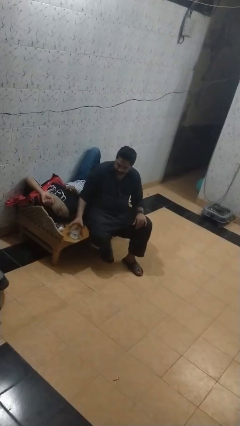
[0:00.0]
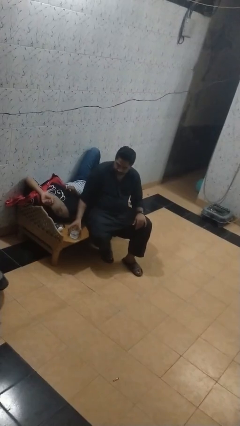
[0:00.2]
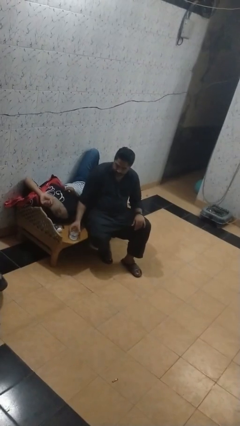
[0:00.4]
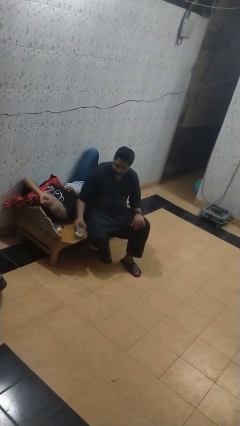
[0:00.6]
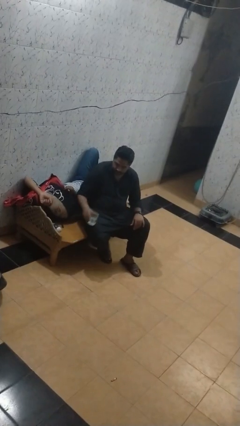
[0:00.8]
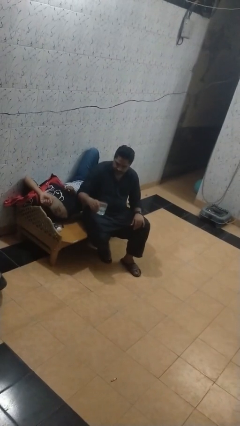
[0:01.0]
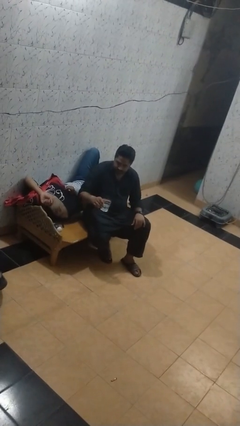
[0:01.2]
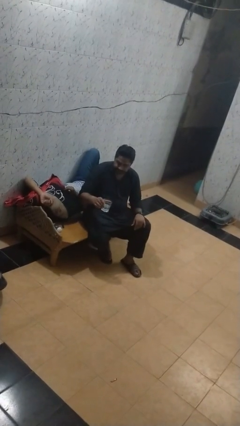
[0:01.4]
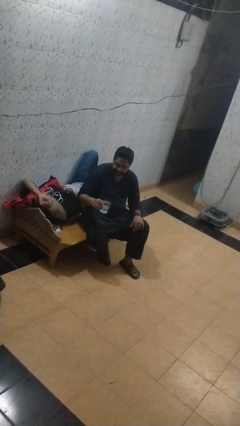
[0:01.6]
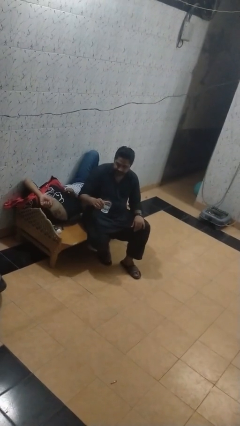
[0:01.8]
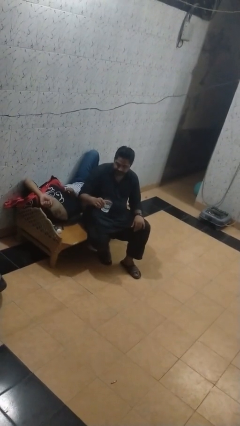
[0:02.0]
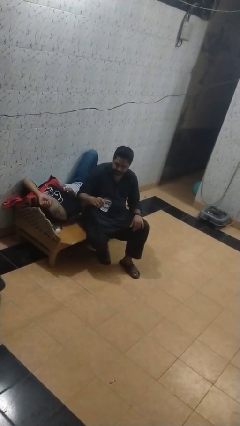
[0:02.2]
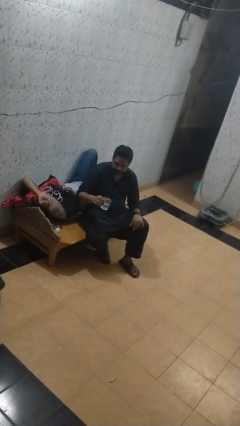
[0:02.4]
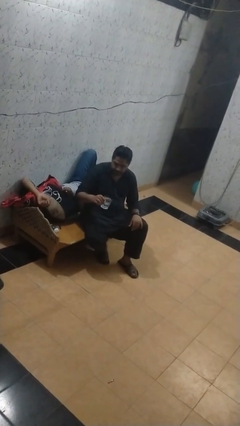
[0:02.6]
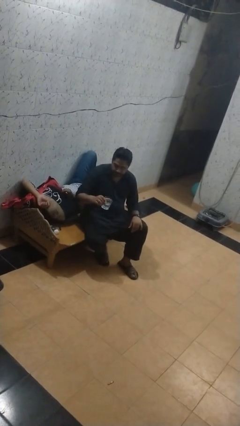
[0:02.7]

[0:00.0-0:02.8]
person picks up object from table

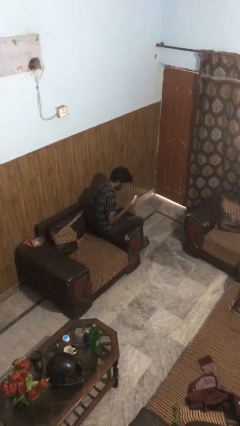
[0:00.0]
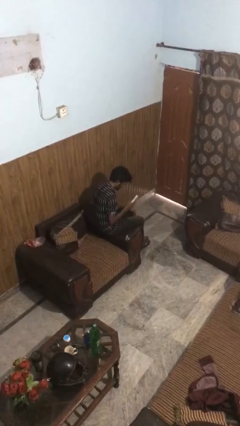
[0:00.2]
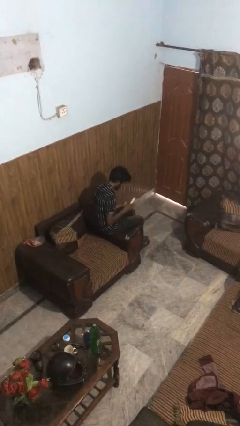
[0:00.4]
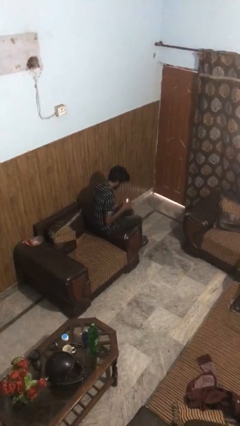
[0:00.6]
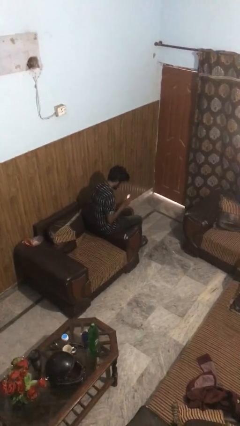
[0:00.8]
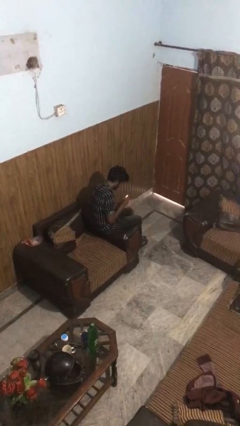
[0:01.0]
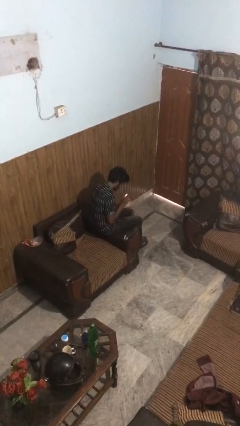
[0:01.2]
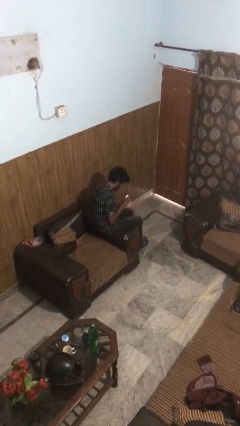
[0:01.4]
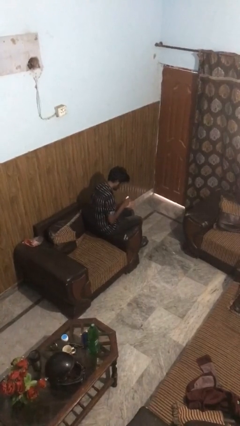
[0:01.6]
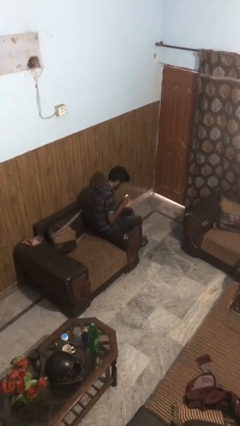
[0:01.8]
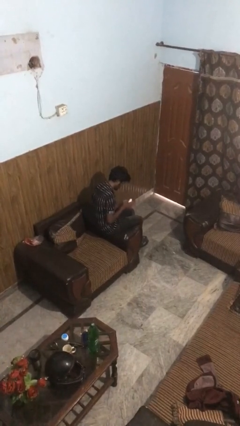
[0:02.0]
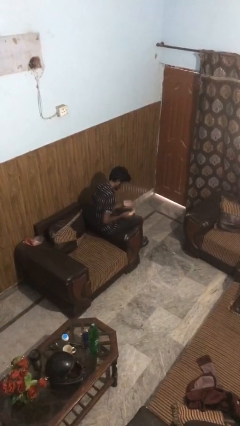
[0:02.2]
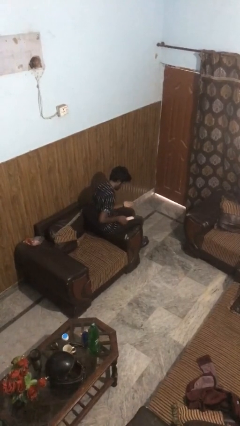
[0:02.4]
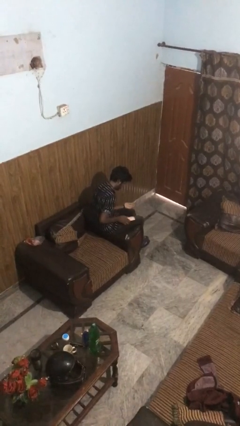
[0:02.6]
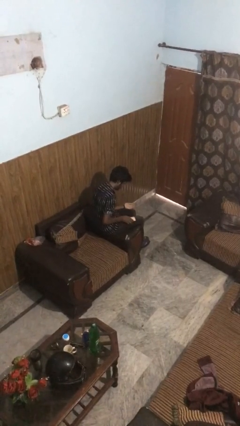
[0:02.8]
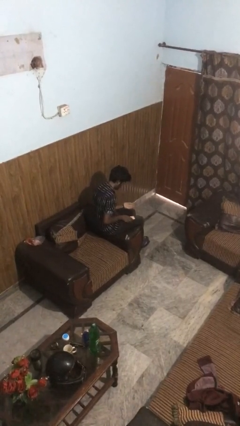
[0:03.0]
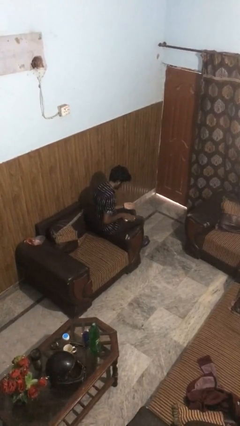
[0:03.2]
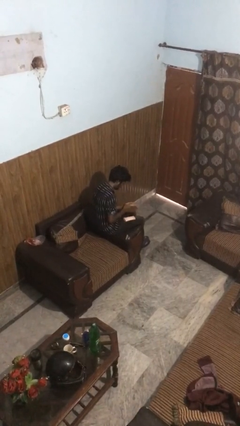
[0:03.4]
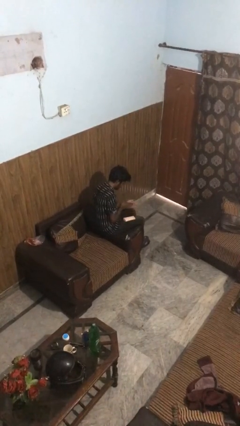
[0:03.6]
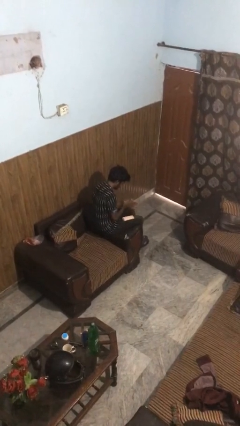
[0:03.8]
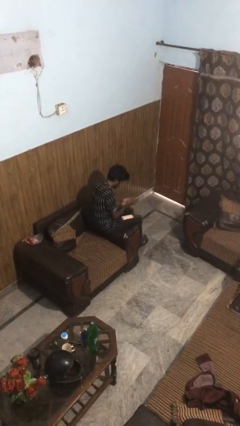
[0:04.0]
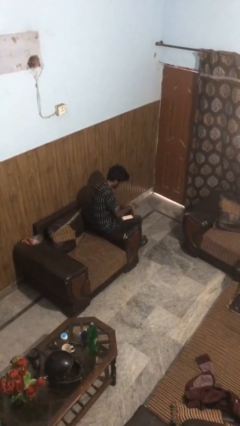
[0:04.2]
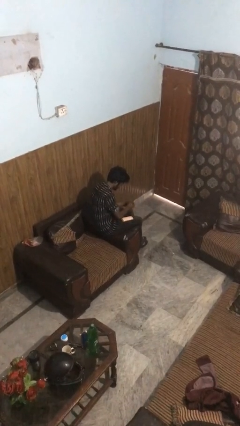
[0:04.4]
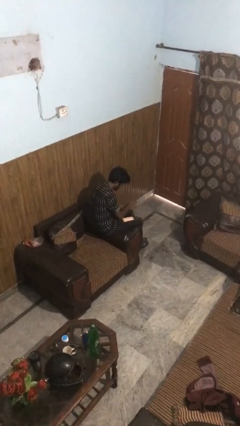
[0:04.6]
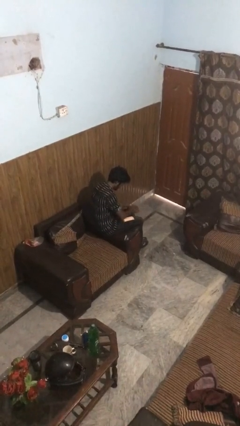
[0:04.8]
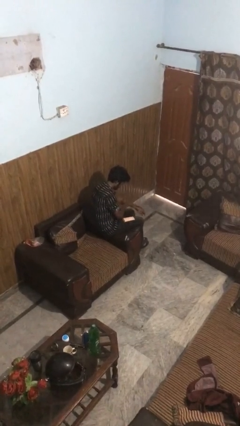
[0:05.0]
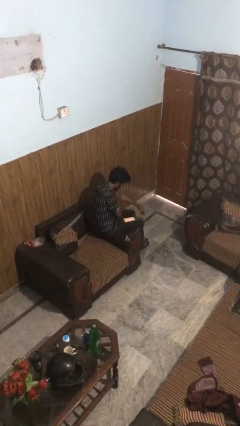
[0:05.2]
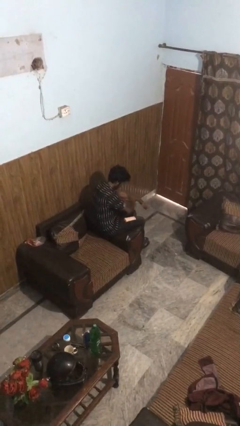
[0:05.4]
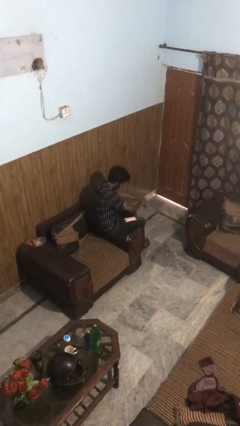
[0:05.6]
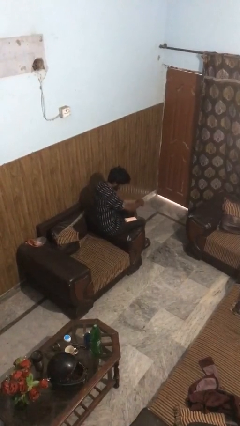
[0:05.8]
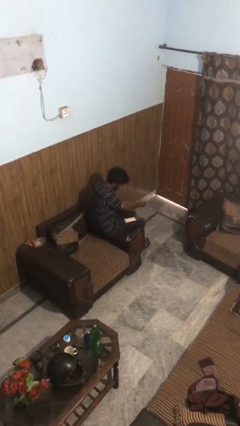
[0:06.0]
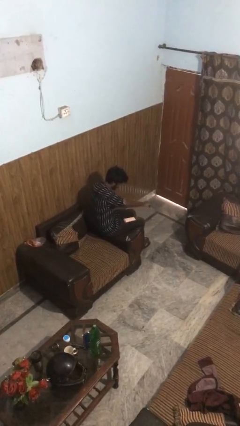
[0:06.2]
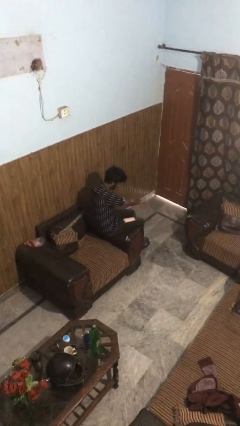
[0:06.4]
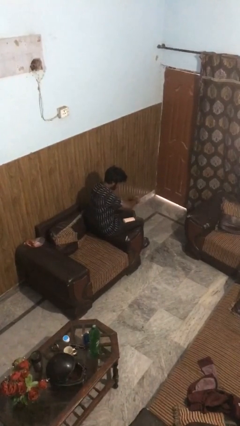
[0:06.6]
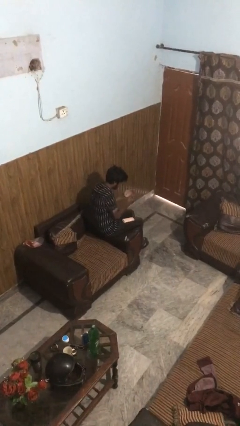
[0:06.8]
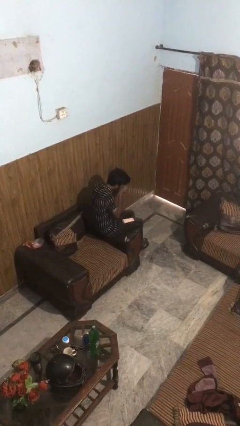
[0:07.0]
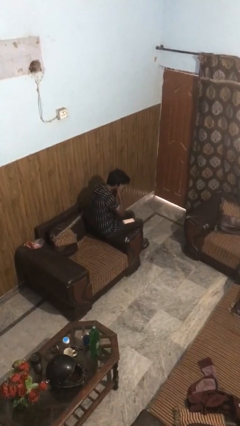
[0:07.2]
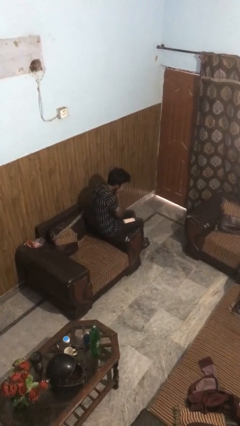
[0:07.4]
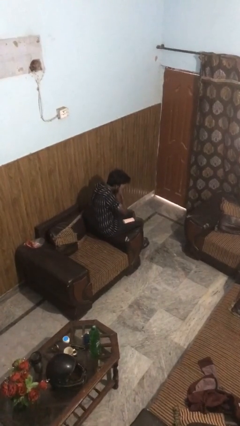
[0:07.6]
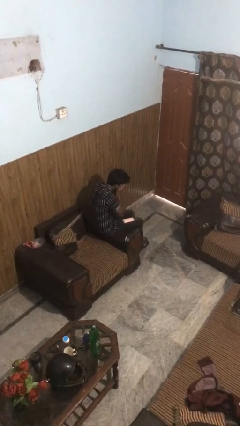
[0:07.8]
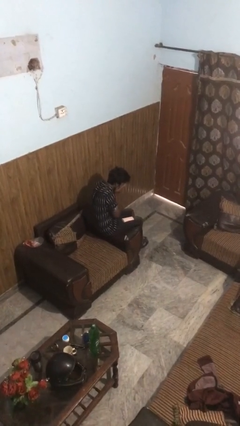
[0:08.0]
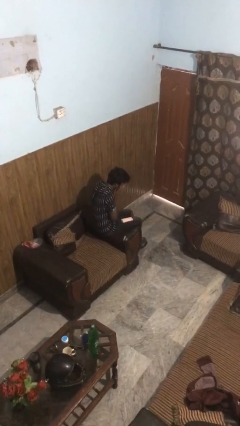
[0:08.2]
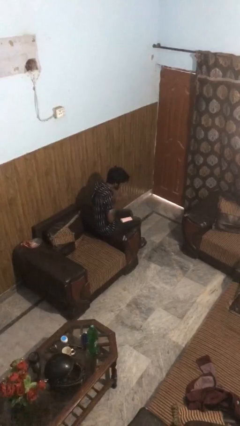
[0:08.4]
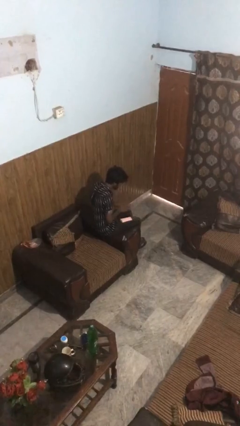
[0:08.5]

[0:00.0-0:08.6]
person applies sunscreen

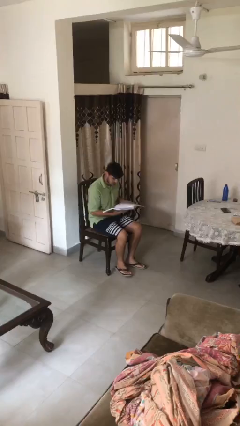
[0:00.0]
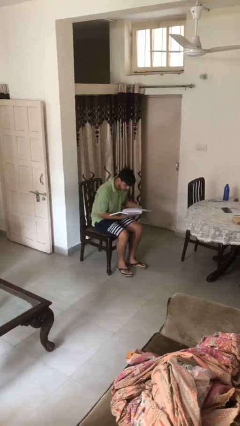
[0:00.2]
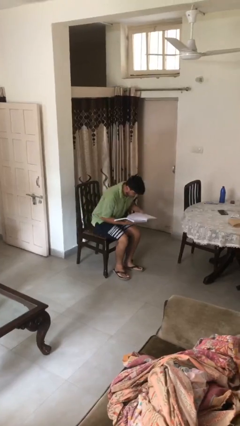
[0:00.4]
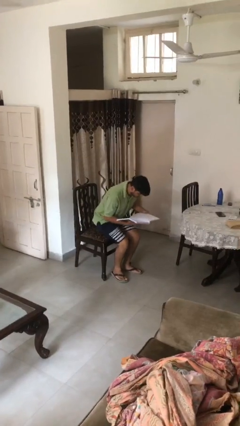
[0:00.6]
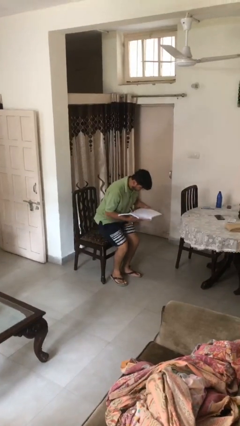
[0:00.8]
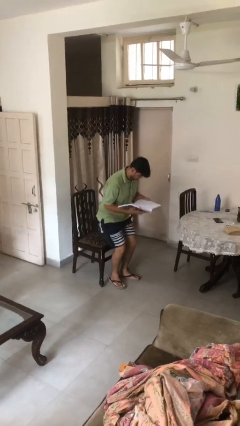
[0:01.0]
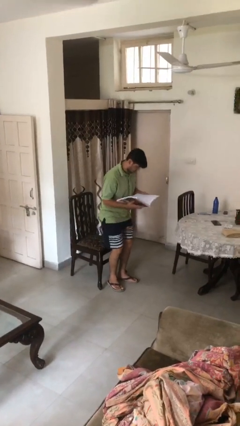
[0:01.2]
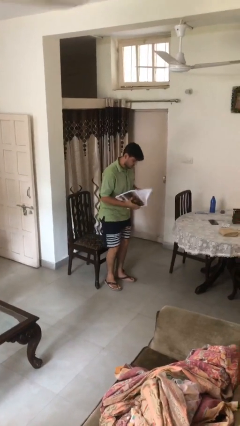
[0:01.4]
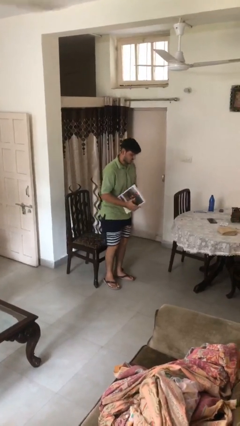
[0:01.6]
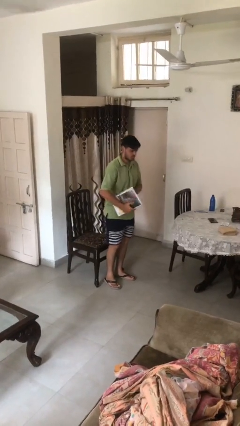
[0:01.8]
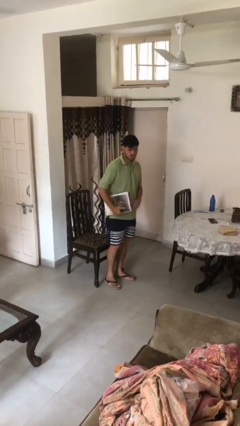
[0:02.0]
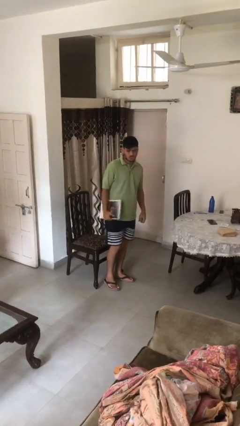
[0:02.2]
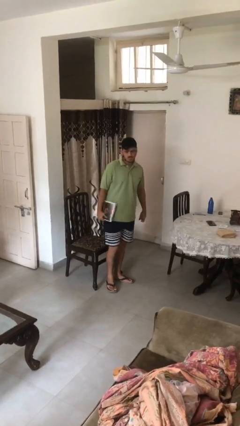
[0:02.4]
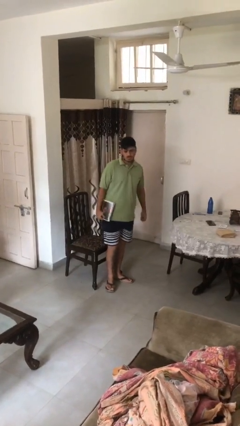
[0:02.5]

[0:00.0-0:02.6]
person stands up

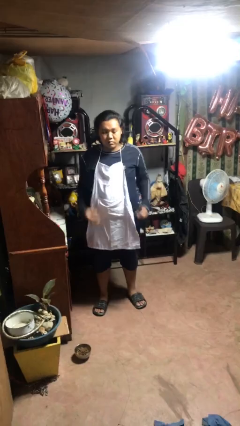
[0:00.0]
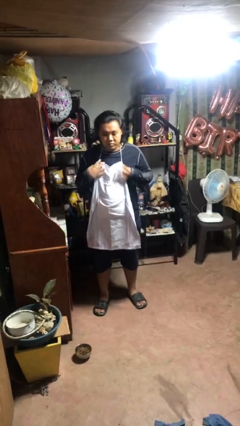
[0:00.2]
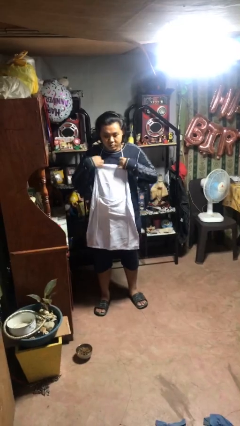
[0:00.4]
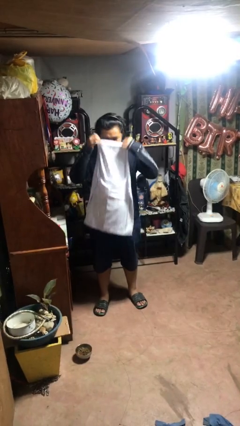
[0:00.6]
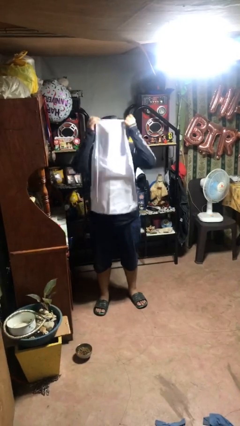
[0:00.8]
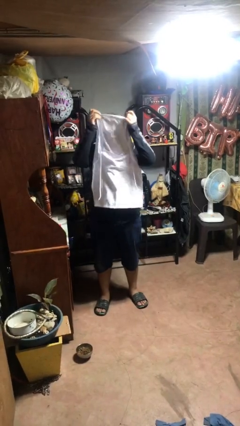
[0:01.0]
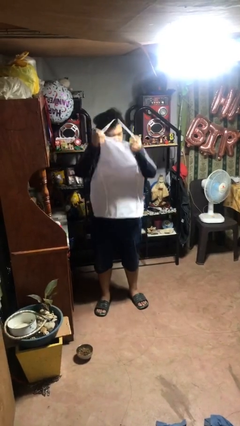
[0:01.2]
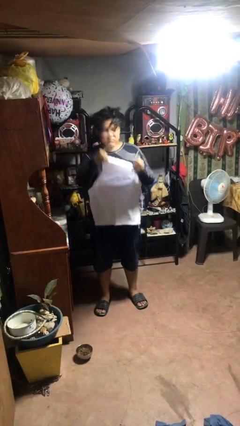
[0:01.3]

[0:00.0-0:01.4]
person takes off apron

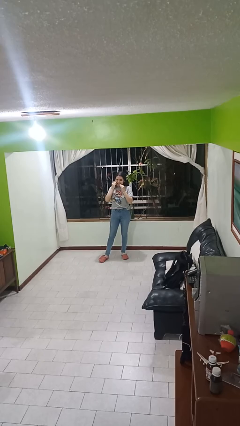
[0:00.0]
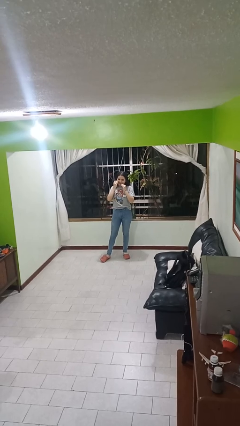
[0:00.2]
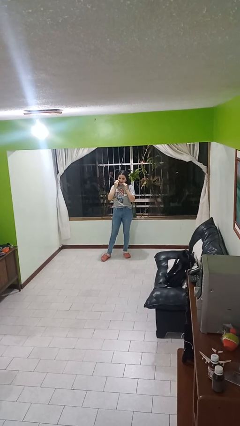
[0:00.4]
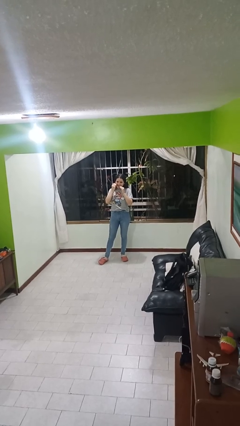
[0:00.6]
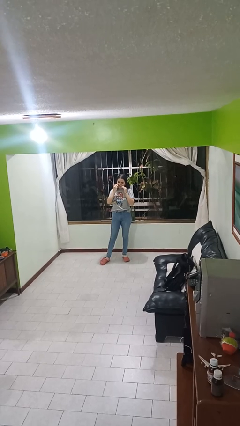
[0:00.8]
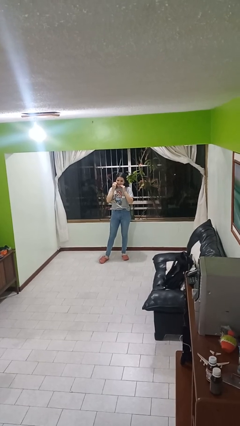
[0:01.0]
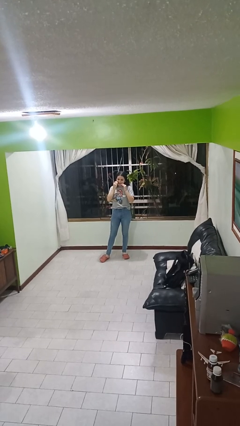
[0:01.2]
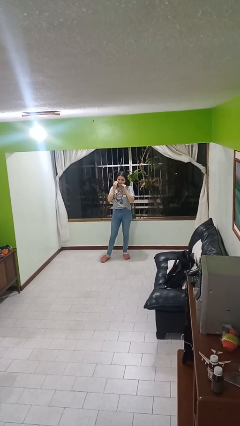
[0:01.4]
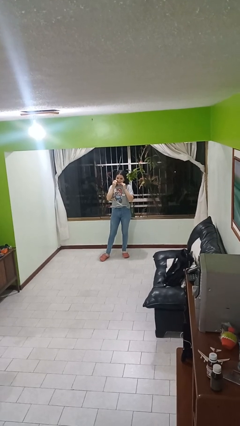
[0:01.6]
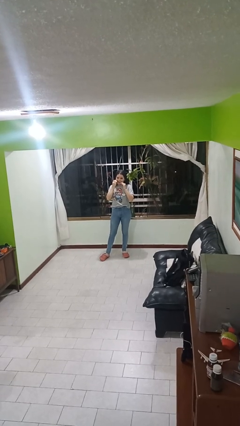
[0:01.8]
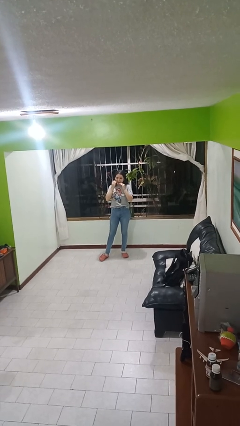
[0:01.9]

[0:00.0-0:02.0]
person flosses
